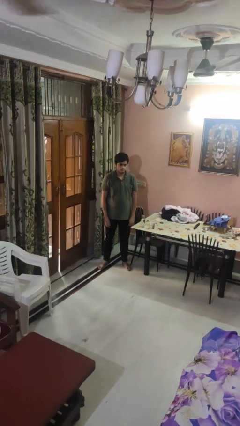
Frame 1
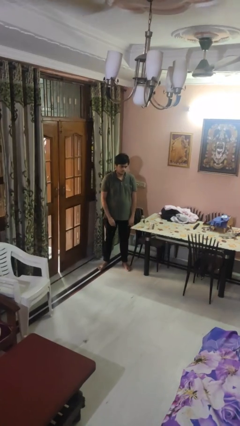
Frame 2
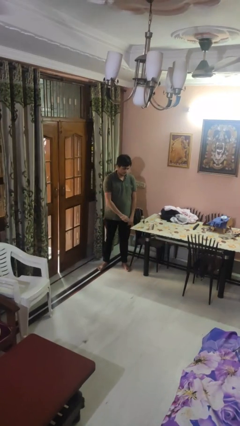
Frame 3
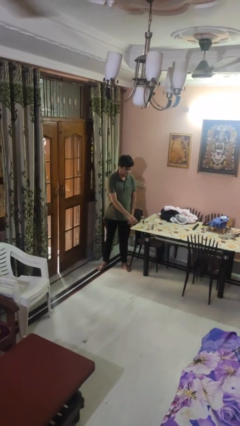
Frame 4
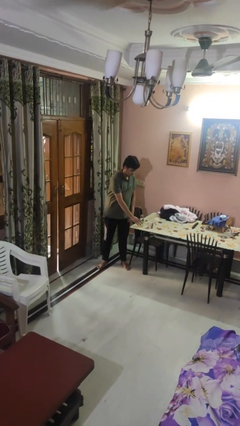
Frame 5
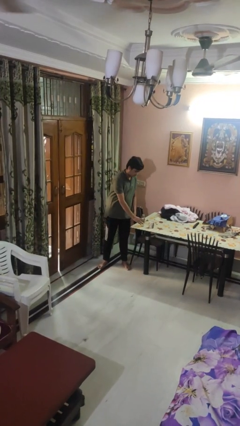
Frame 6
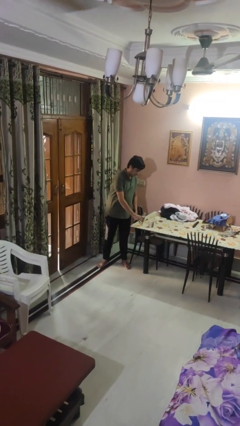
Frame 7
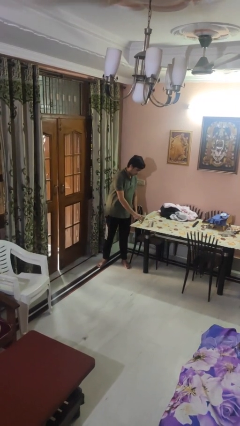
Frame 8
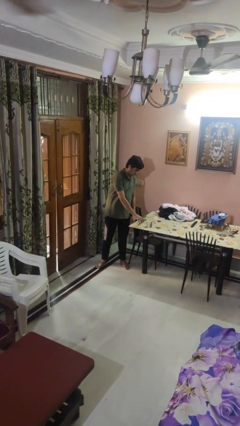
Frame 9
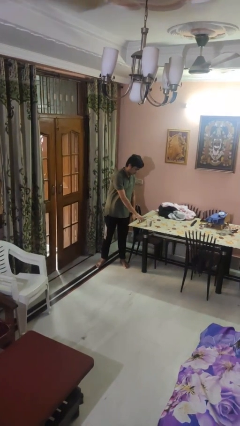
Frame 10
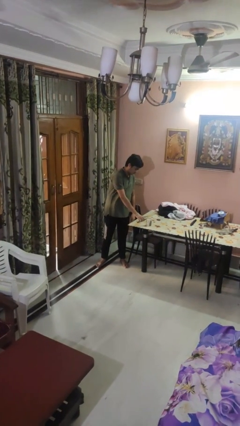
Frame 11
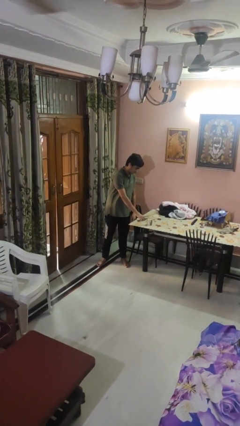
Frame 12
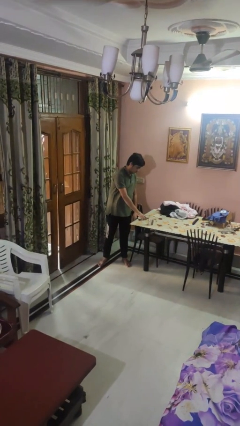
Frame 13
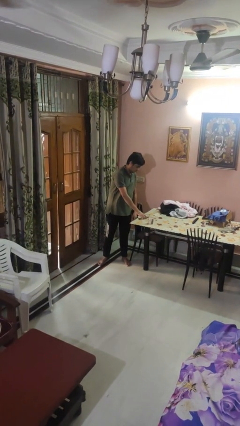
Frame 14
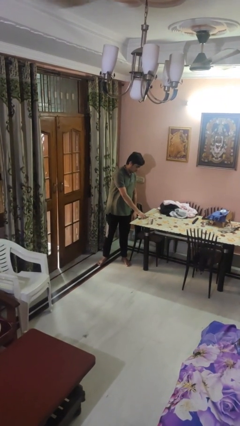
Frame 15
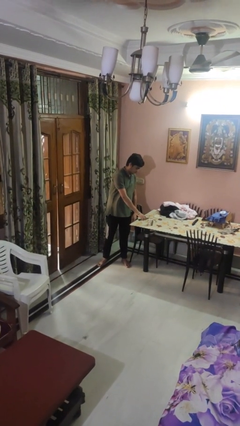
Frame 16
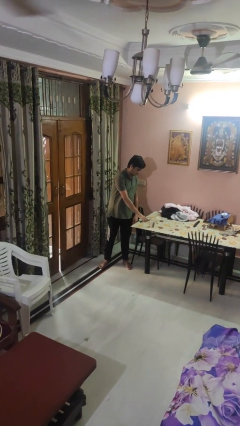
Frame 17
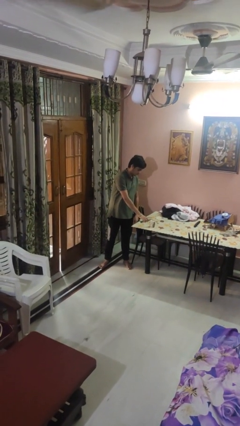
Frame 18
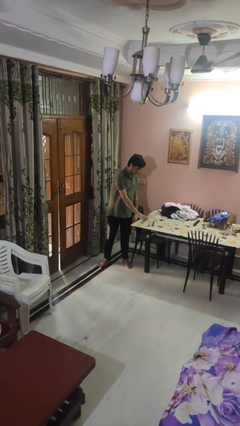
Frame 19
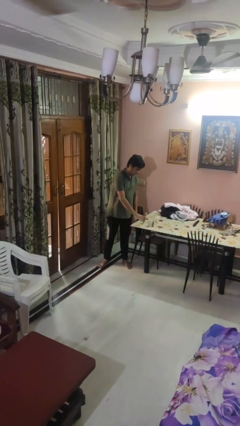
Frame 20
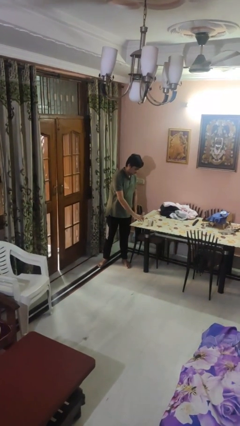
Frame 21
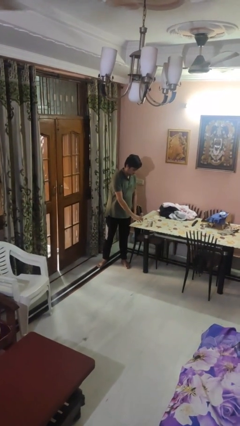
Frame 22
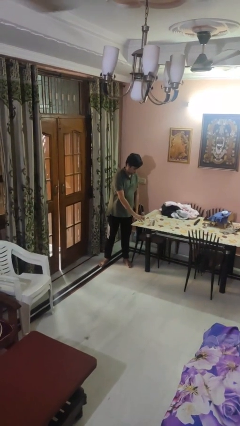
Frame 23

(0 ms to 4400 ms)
person pours liquid into cup

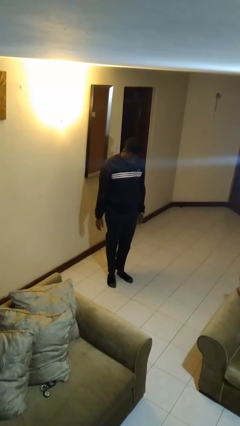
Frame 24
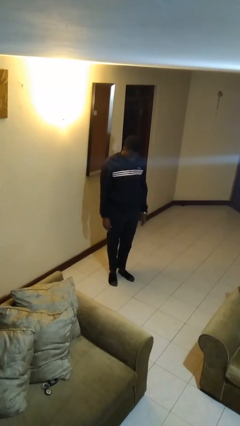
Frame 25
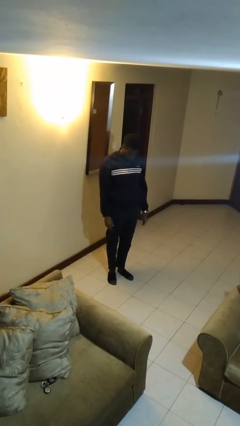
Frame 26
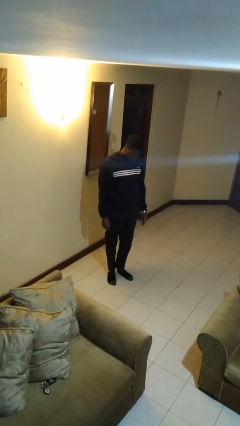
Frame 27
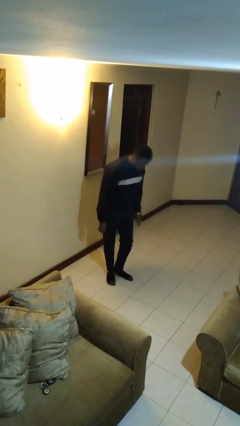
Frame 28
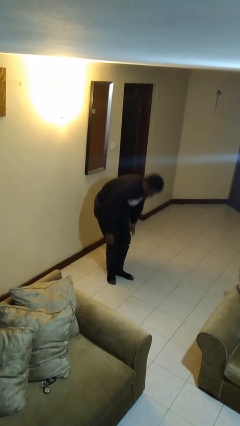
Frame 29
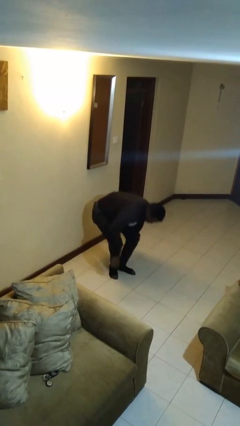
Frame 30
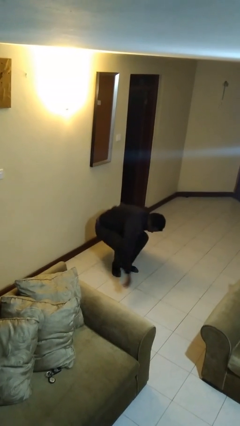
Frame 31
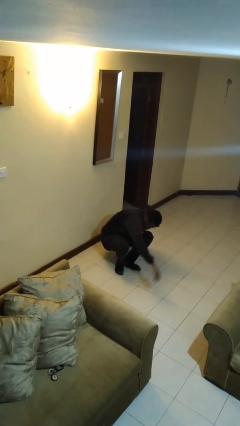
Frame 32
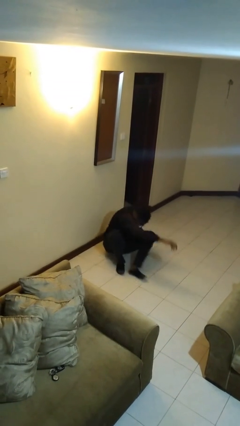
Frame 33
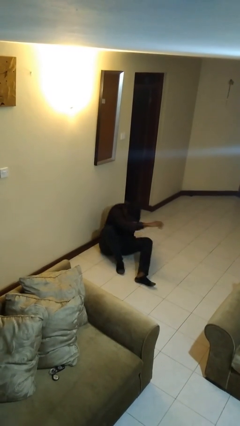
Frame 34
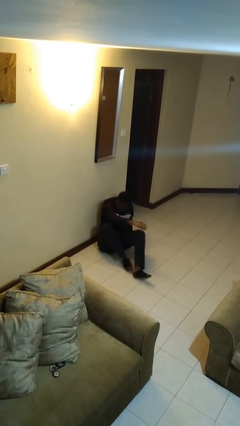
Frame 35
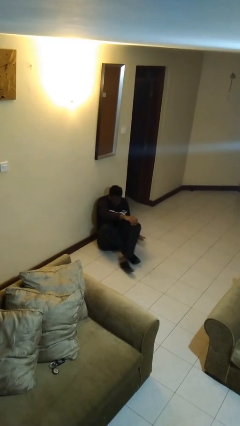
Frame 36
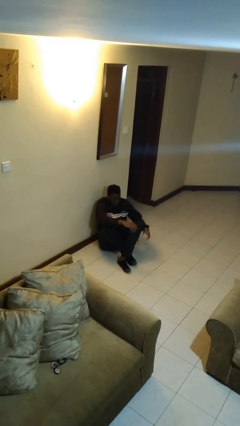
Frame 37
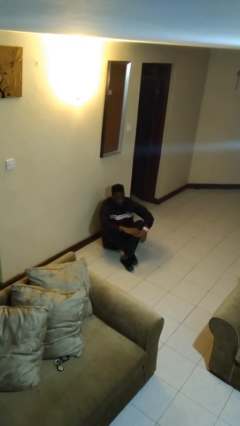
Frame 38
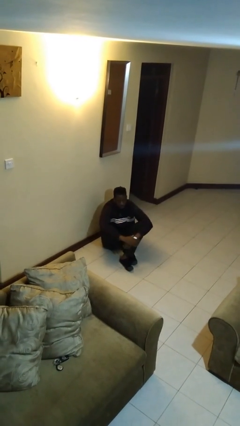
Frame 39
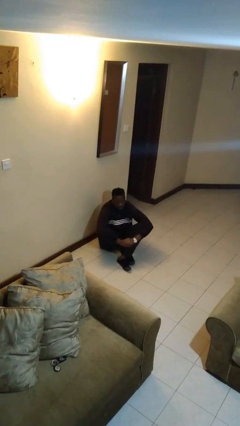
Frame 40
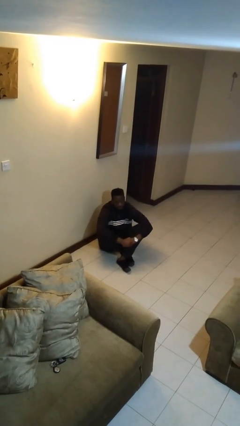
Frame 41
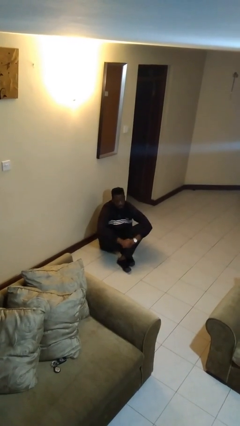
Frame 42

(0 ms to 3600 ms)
person sits crisscross

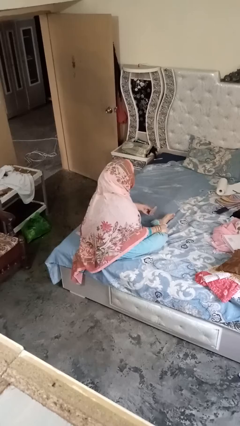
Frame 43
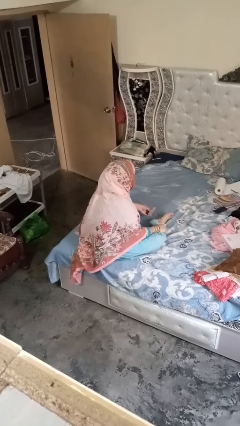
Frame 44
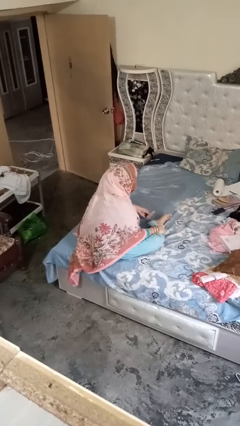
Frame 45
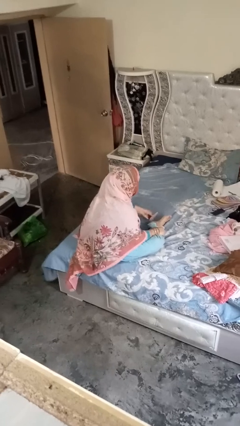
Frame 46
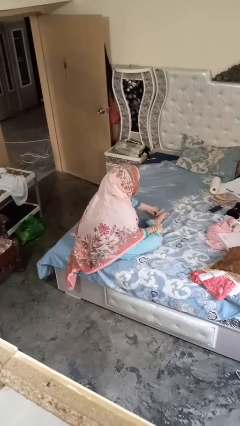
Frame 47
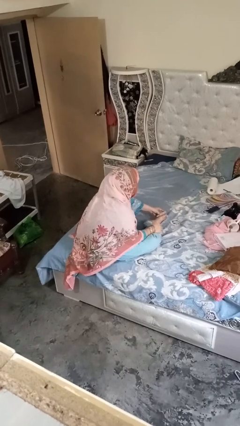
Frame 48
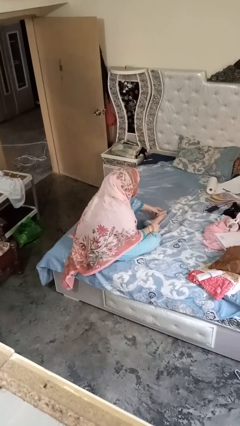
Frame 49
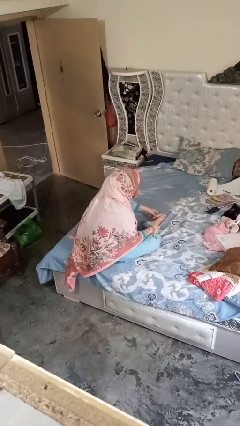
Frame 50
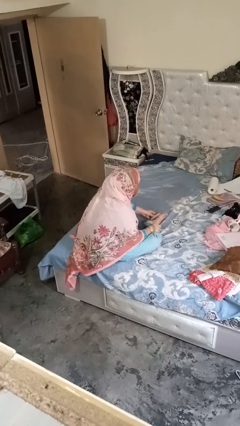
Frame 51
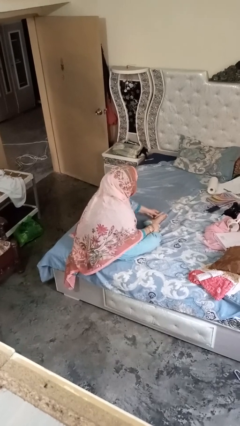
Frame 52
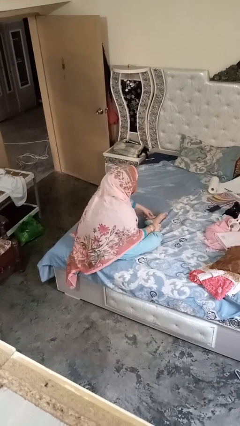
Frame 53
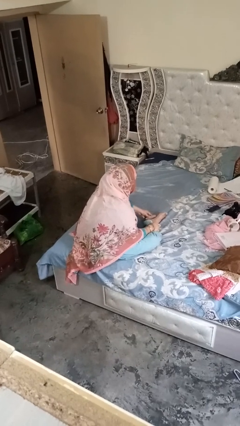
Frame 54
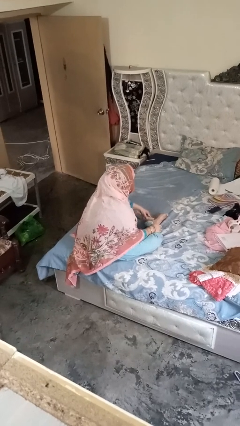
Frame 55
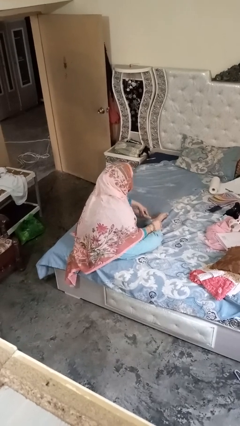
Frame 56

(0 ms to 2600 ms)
person rubs foot

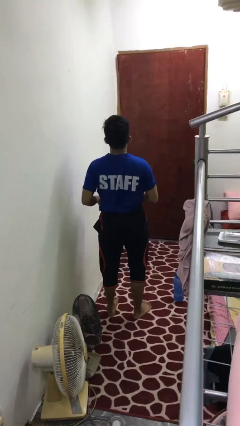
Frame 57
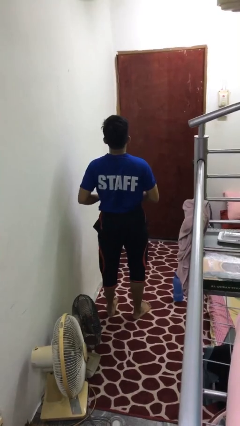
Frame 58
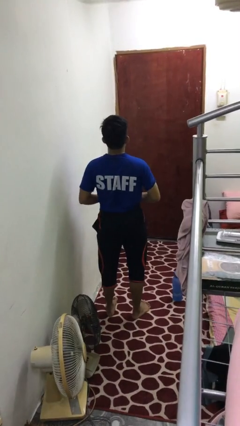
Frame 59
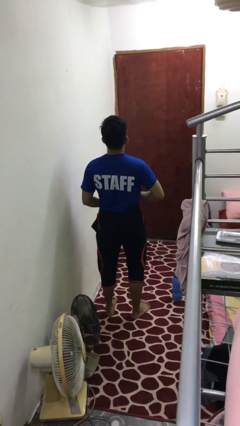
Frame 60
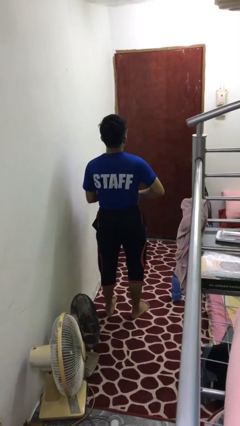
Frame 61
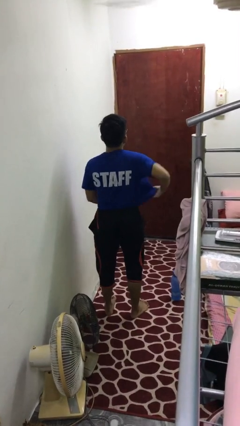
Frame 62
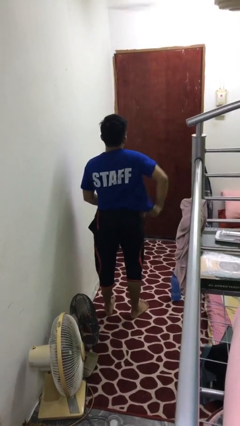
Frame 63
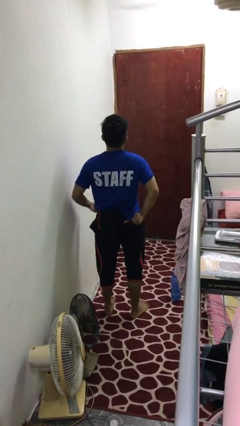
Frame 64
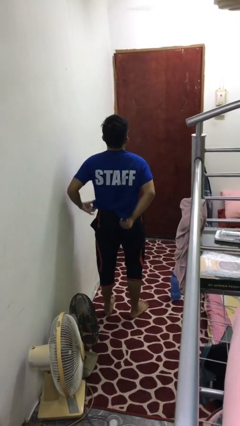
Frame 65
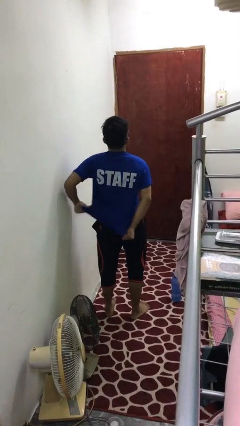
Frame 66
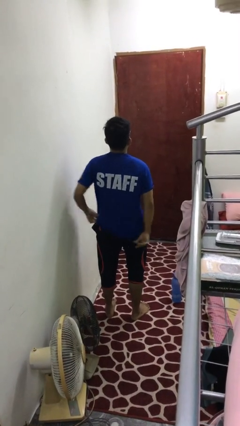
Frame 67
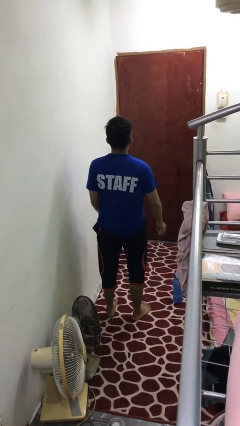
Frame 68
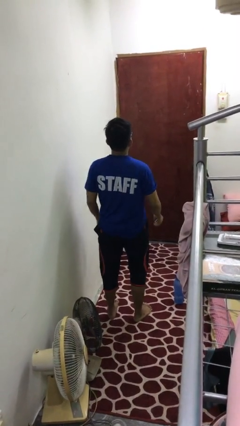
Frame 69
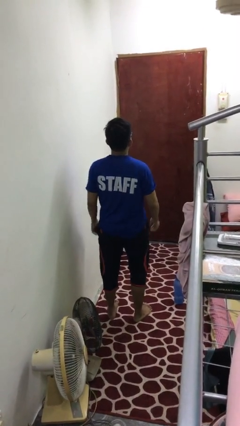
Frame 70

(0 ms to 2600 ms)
person untucks shirt

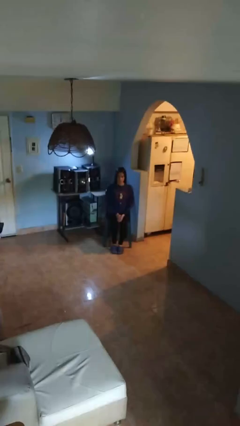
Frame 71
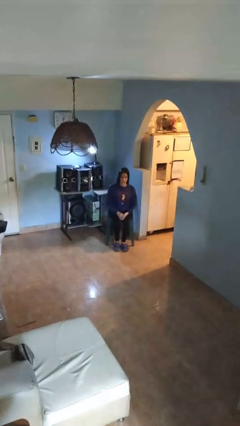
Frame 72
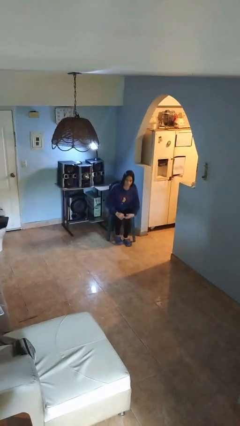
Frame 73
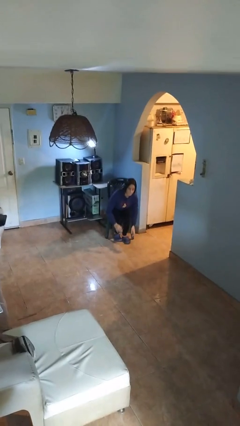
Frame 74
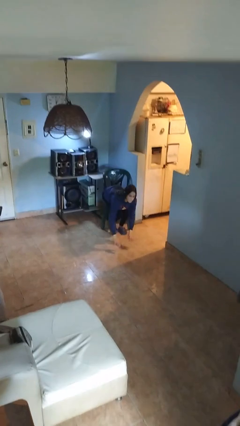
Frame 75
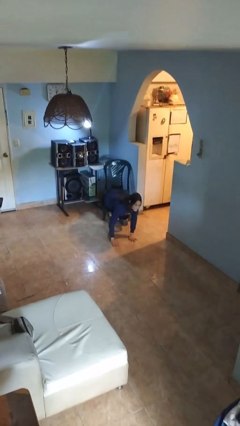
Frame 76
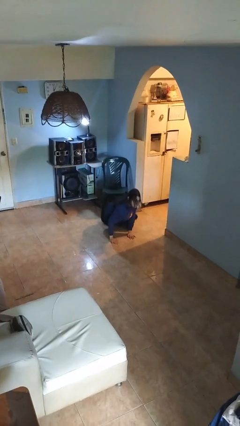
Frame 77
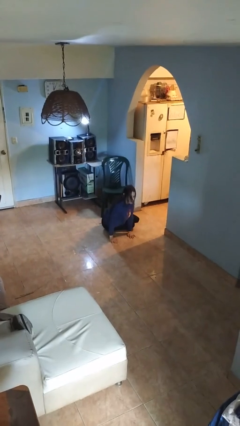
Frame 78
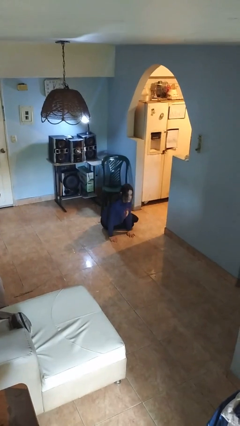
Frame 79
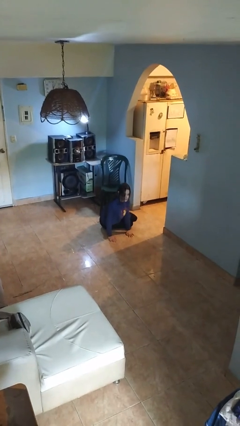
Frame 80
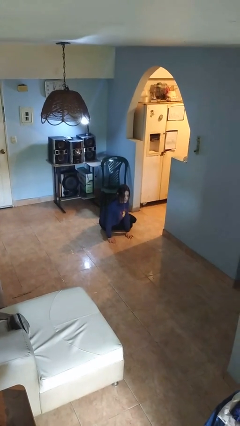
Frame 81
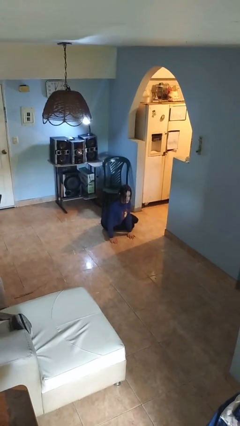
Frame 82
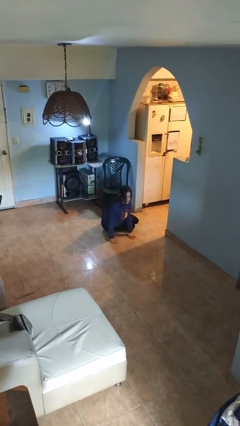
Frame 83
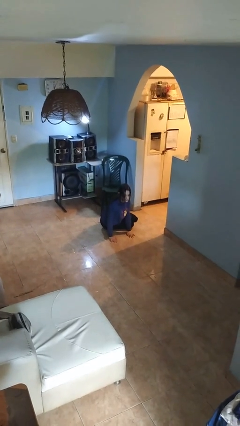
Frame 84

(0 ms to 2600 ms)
person falls from chair

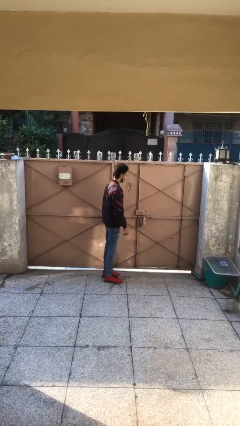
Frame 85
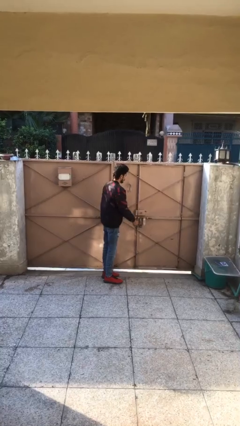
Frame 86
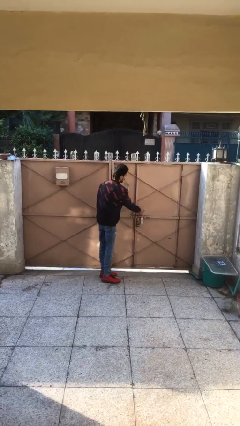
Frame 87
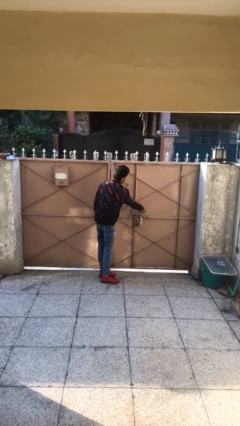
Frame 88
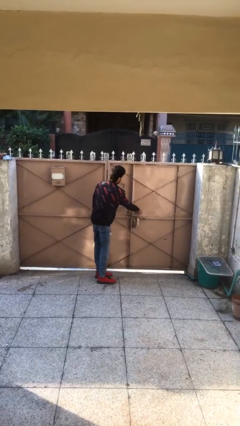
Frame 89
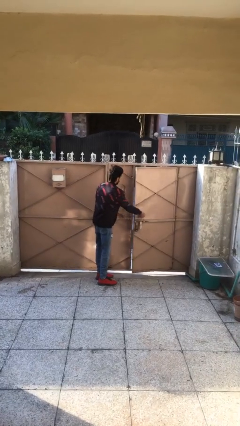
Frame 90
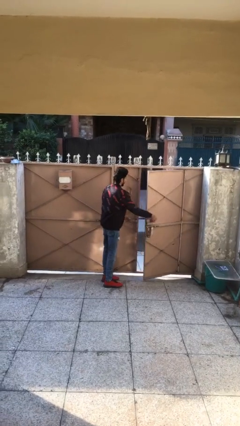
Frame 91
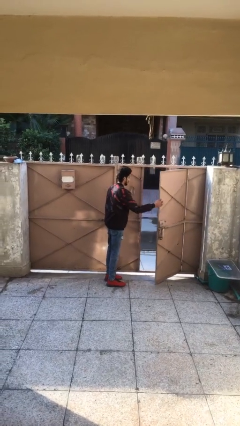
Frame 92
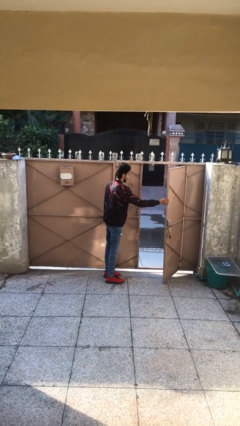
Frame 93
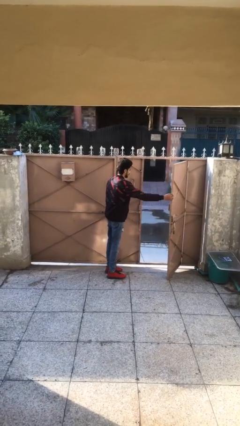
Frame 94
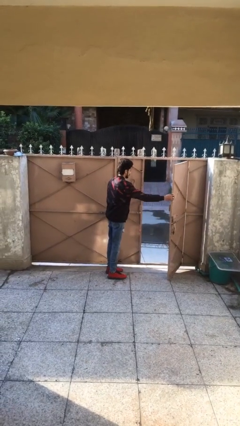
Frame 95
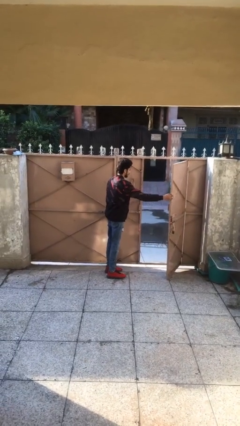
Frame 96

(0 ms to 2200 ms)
person opens facility door
